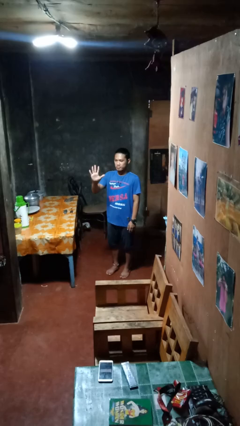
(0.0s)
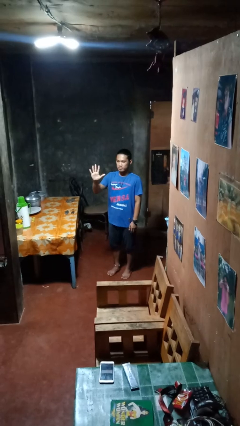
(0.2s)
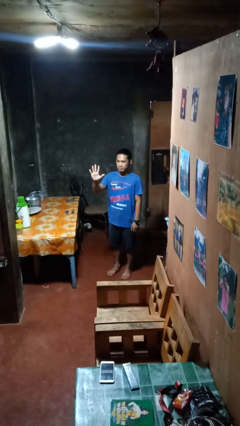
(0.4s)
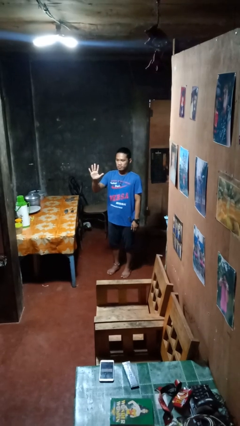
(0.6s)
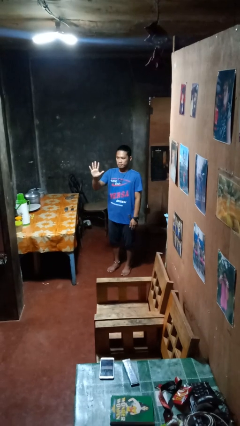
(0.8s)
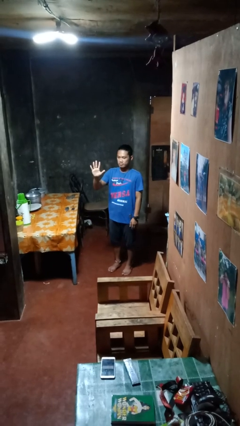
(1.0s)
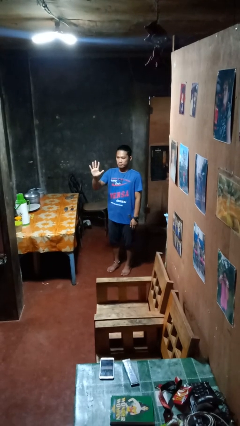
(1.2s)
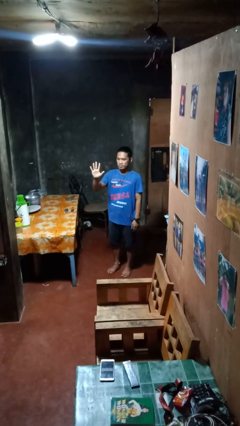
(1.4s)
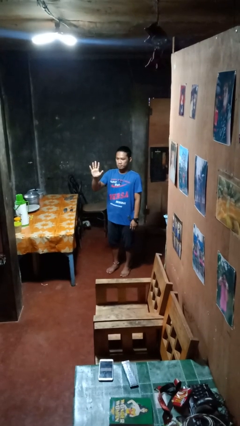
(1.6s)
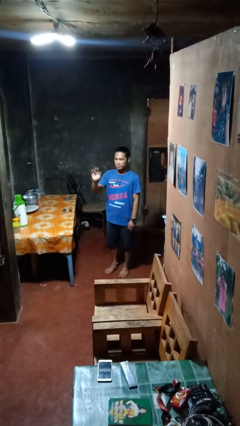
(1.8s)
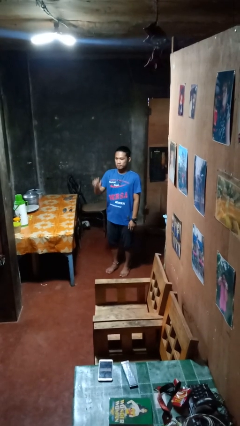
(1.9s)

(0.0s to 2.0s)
person gestures number five

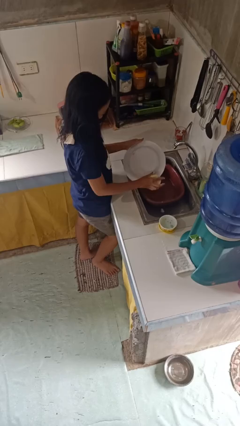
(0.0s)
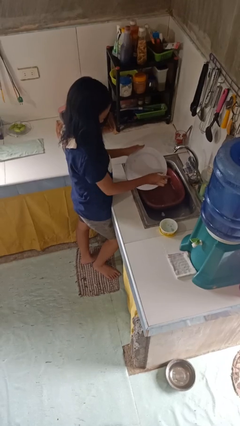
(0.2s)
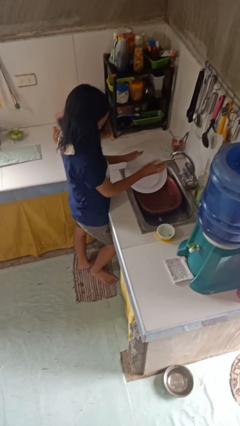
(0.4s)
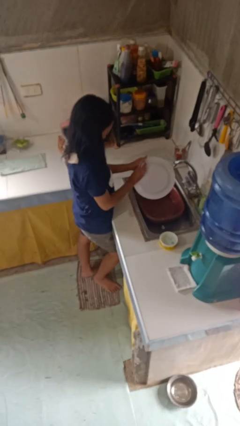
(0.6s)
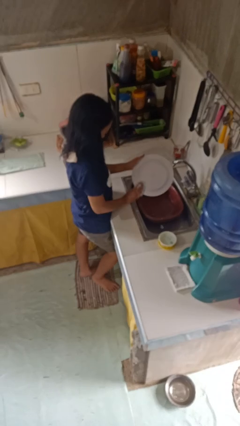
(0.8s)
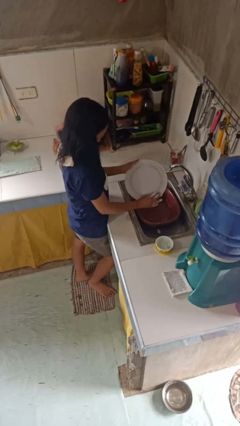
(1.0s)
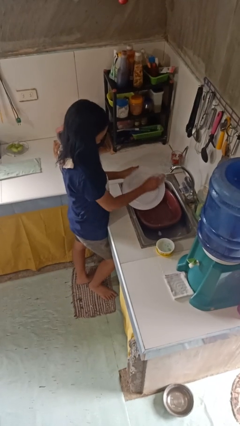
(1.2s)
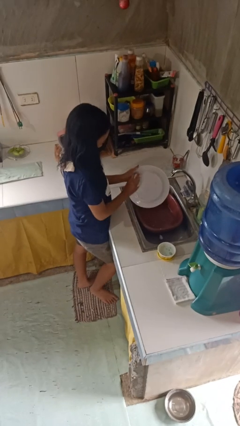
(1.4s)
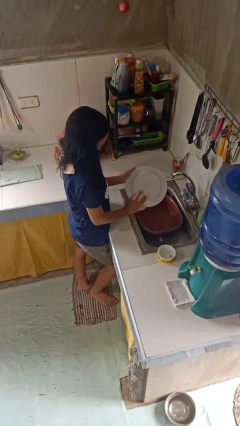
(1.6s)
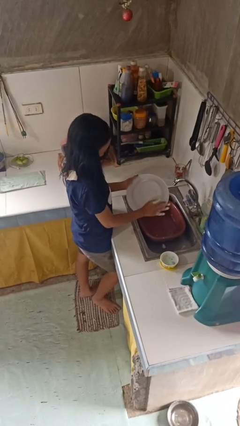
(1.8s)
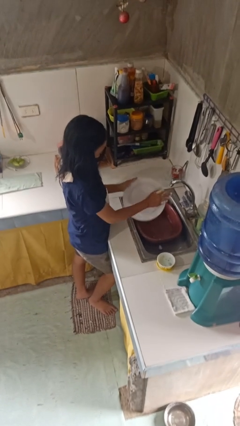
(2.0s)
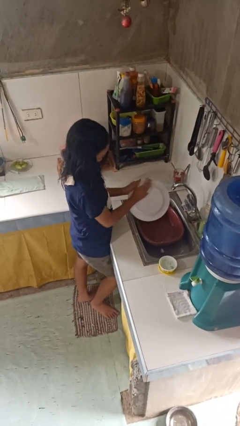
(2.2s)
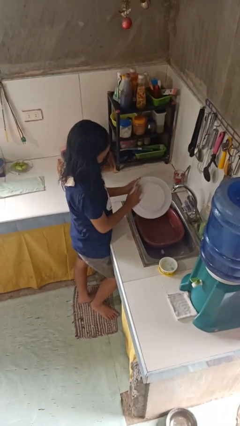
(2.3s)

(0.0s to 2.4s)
person washes dish

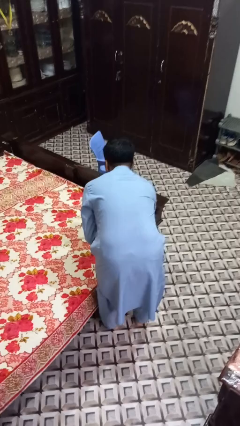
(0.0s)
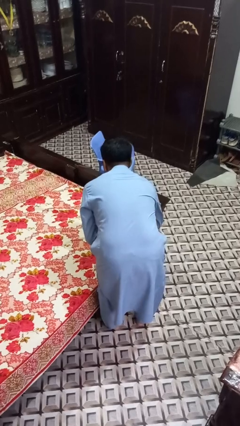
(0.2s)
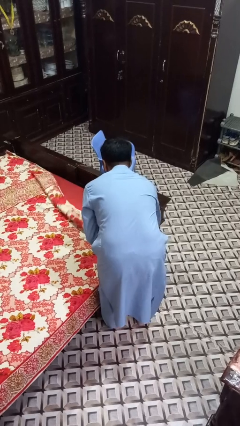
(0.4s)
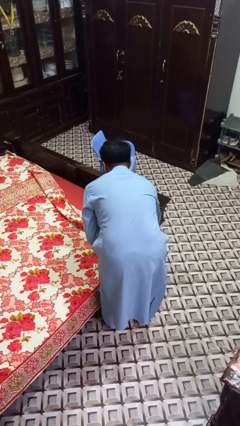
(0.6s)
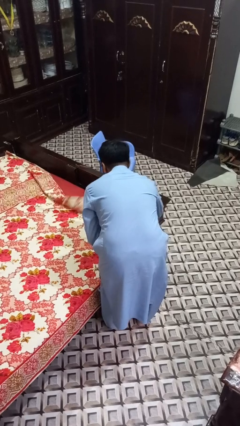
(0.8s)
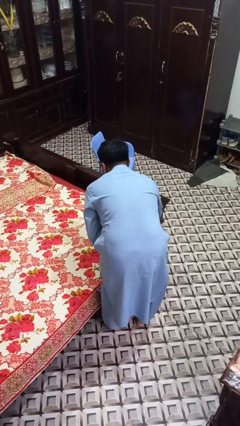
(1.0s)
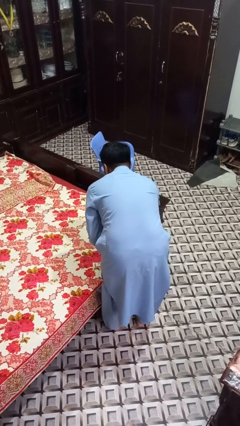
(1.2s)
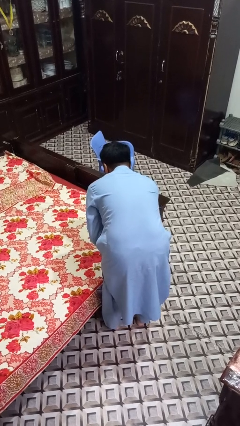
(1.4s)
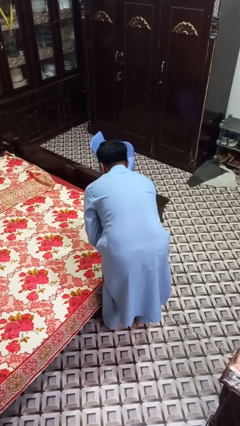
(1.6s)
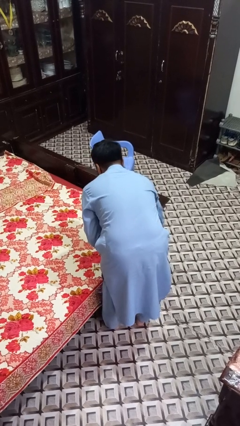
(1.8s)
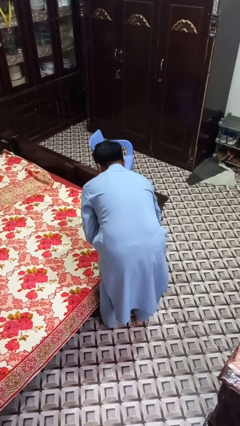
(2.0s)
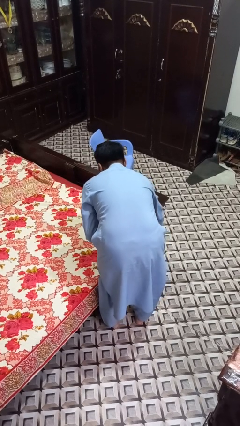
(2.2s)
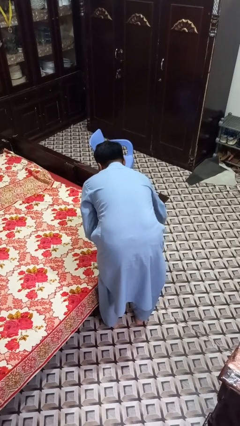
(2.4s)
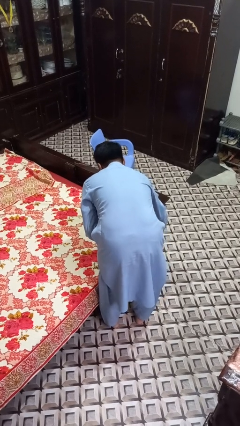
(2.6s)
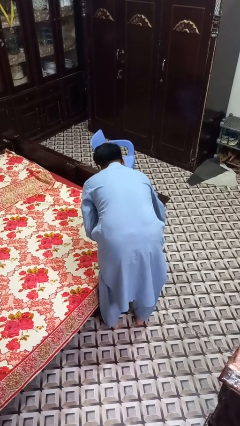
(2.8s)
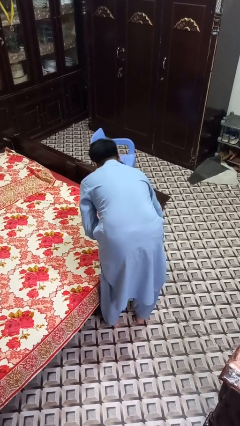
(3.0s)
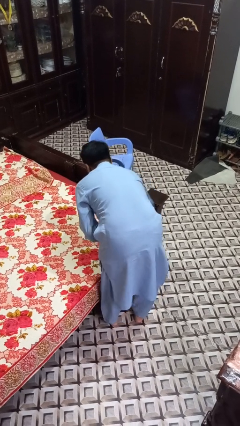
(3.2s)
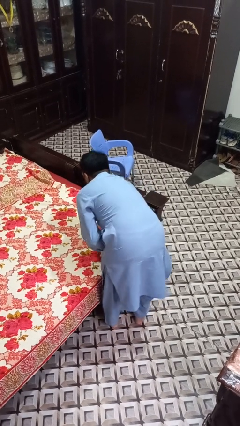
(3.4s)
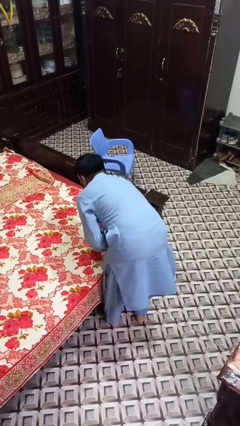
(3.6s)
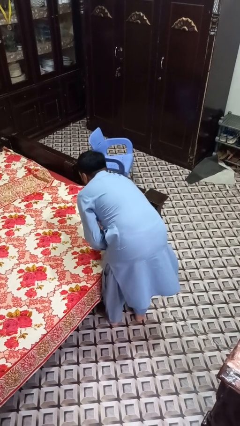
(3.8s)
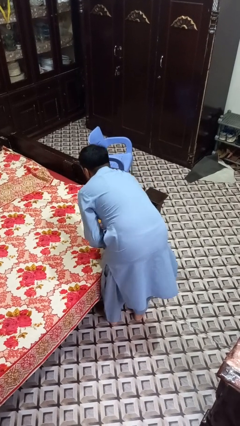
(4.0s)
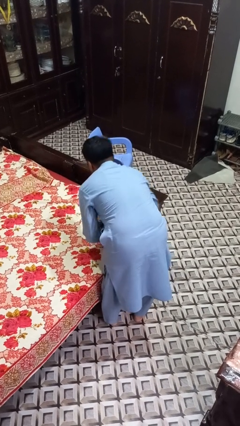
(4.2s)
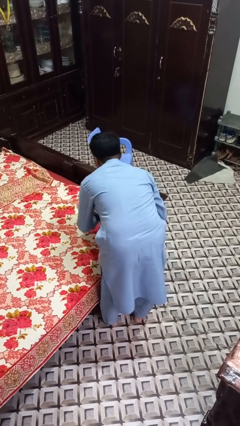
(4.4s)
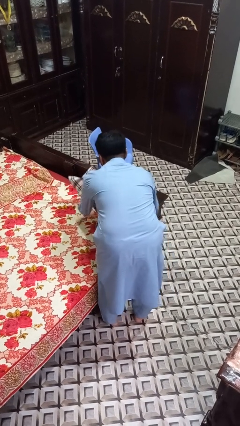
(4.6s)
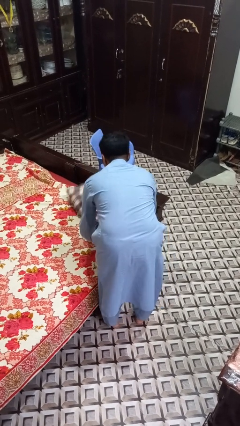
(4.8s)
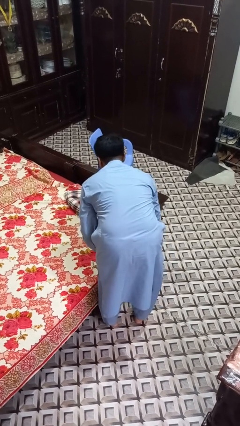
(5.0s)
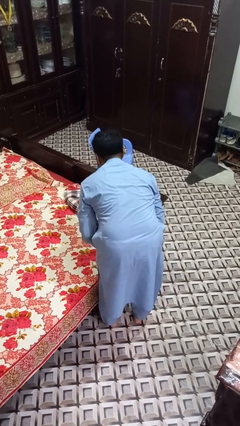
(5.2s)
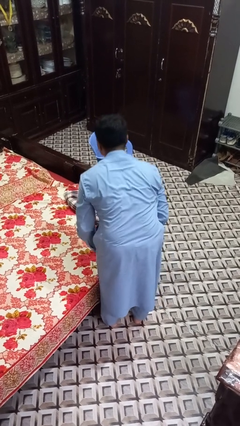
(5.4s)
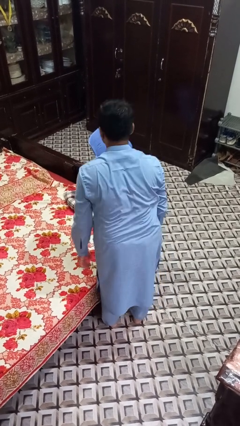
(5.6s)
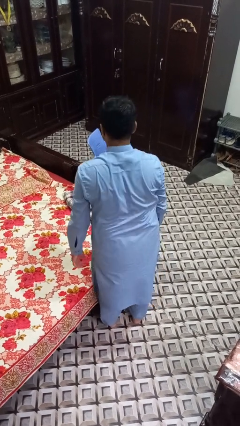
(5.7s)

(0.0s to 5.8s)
person makes bed

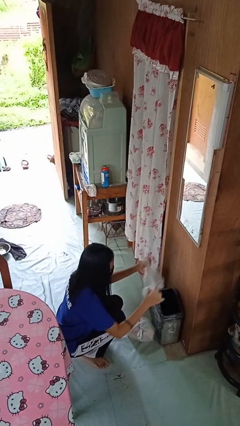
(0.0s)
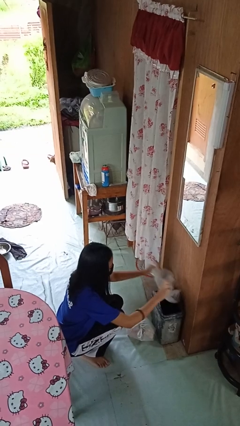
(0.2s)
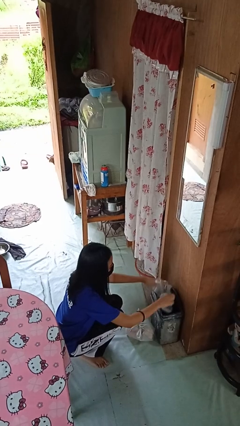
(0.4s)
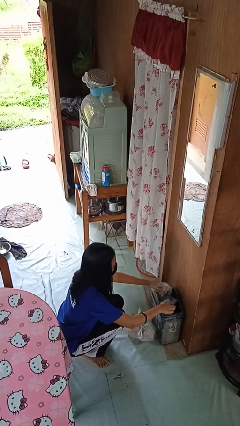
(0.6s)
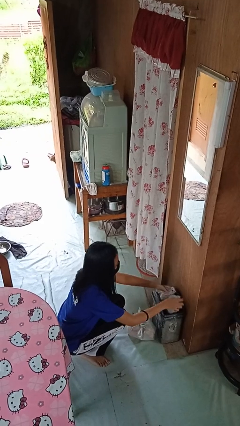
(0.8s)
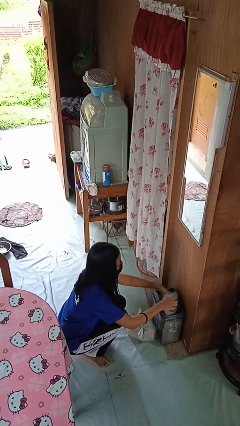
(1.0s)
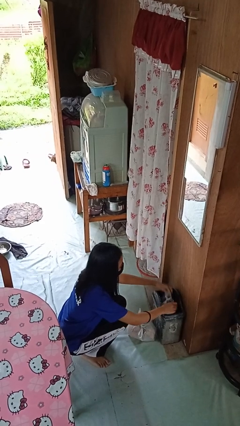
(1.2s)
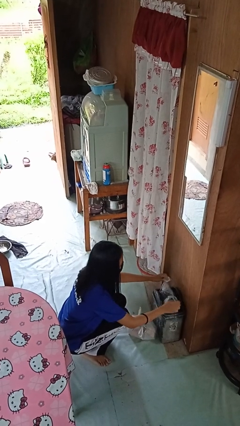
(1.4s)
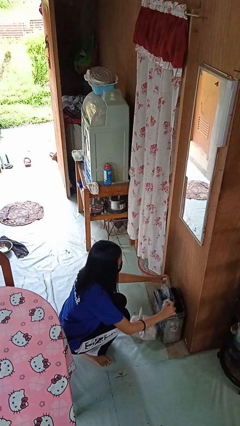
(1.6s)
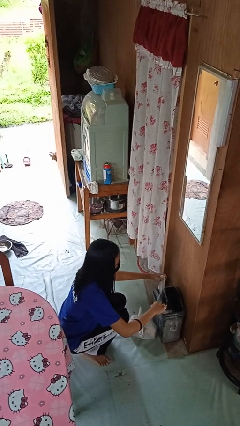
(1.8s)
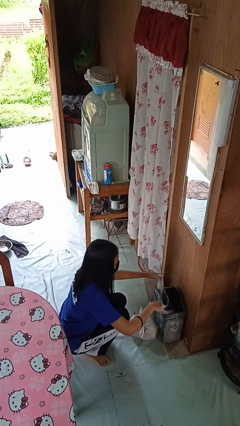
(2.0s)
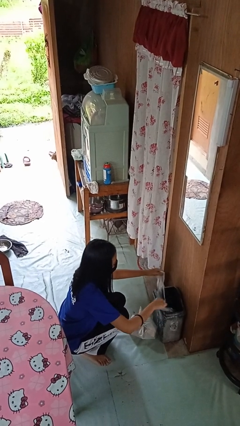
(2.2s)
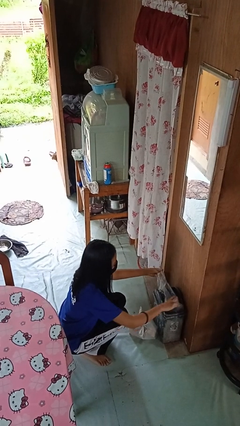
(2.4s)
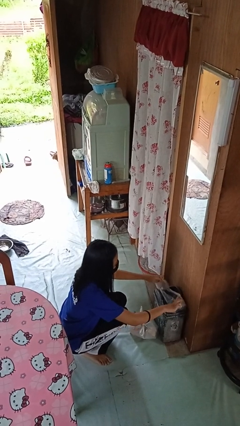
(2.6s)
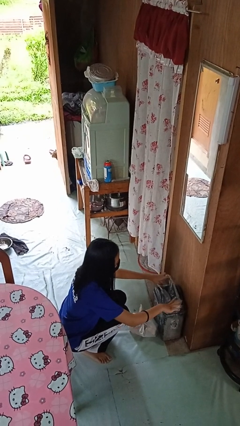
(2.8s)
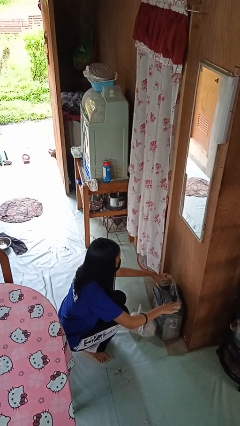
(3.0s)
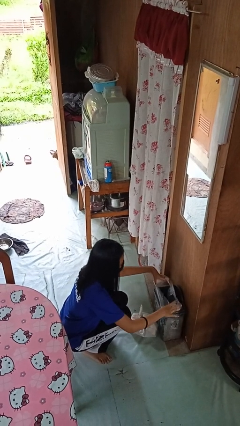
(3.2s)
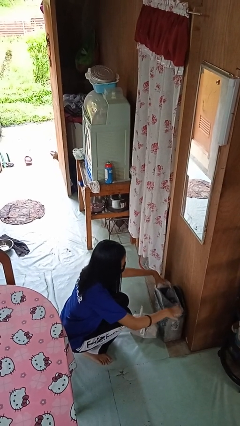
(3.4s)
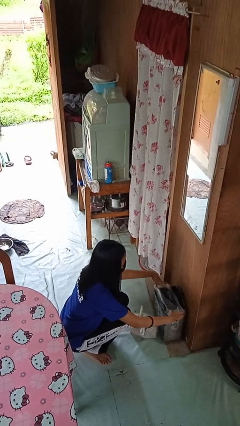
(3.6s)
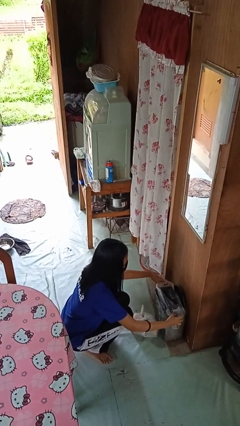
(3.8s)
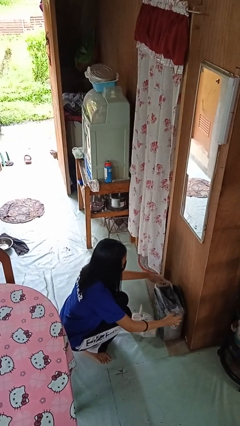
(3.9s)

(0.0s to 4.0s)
person inserts trashbag into trashcan

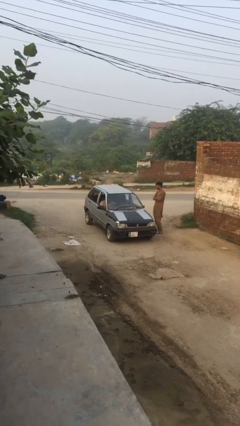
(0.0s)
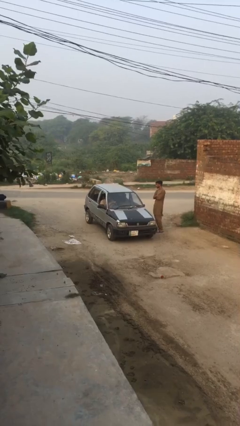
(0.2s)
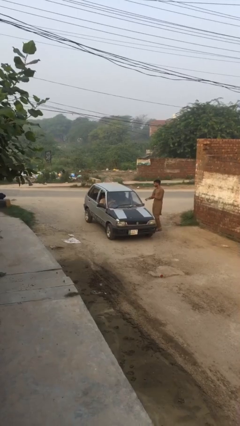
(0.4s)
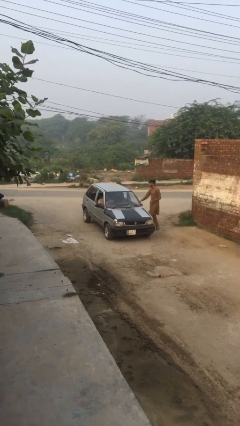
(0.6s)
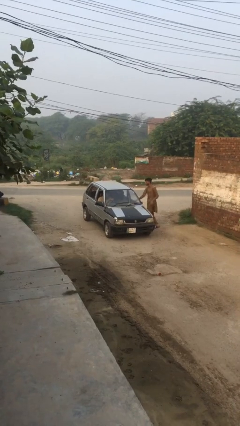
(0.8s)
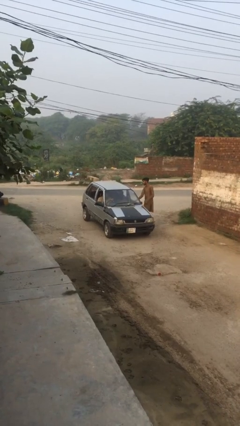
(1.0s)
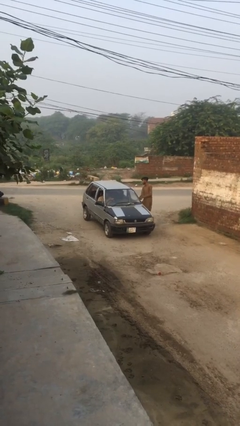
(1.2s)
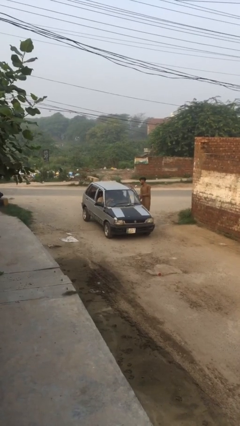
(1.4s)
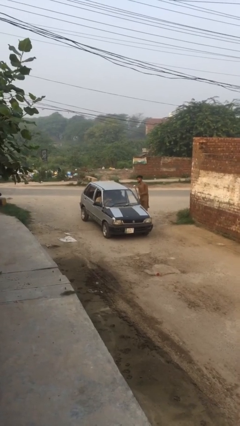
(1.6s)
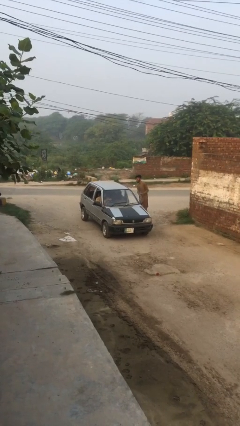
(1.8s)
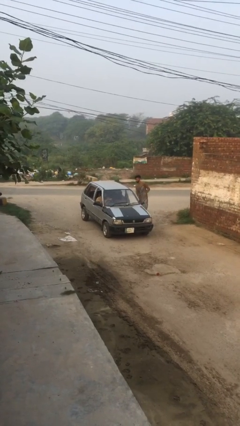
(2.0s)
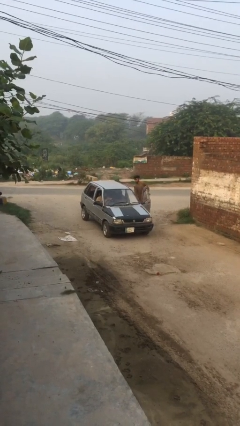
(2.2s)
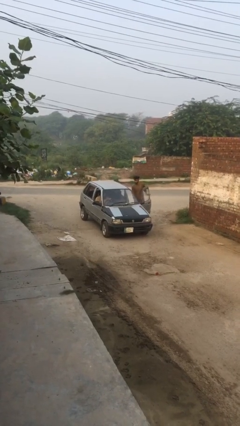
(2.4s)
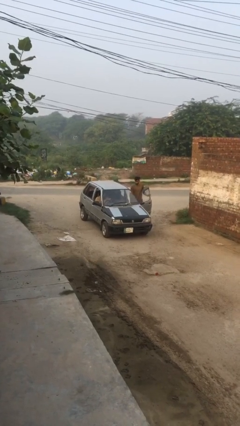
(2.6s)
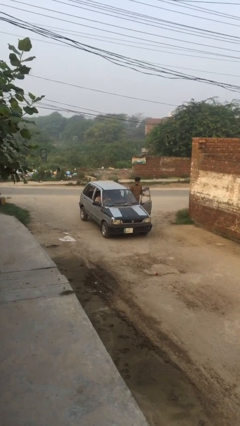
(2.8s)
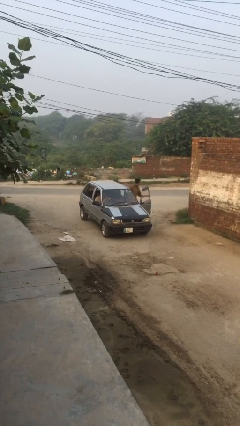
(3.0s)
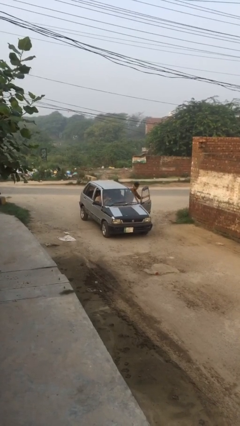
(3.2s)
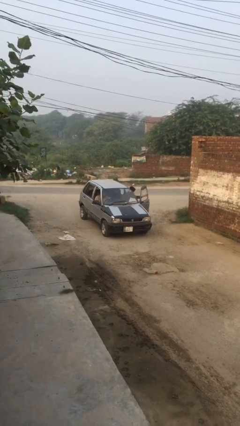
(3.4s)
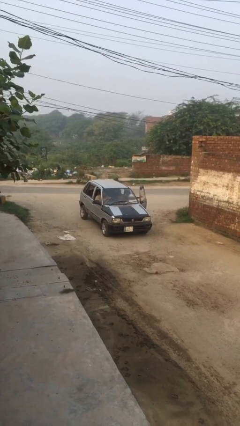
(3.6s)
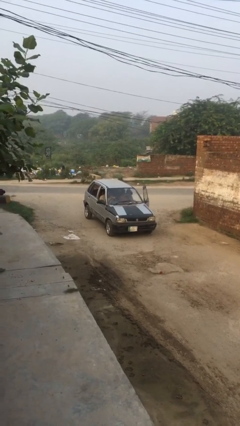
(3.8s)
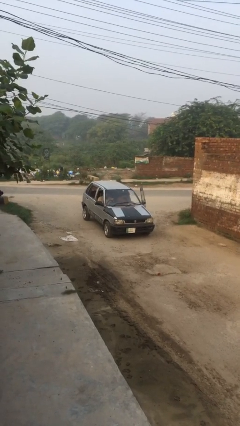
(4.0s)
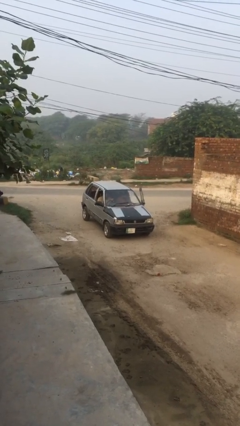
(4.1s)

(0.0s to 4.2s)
car picks up person
